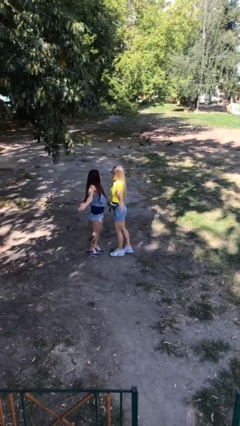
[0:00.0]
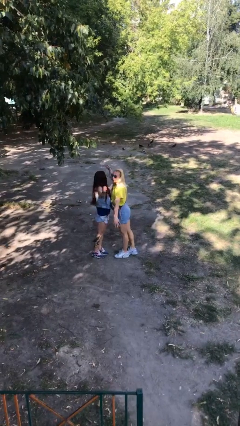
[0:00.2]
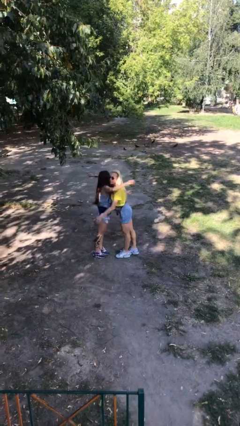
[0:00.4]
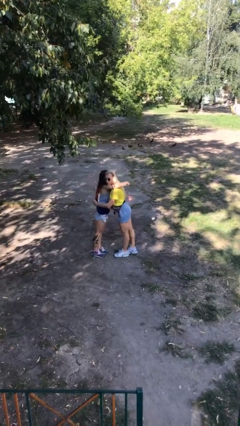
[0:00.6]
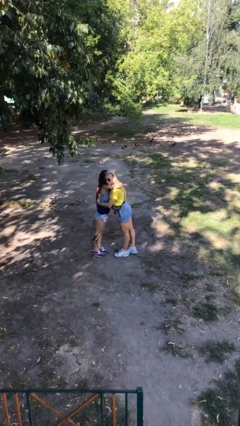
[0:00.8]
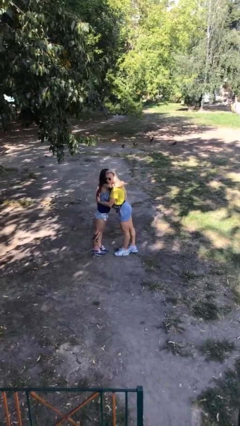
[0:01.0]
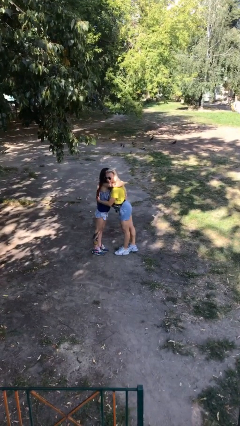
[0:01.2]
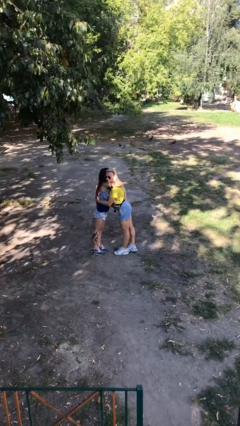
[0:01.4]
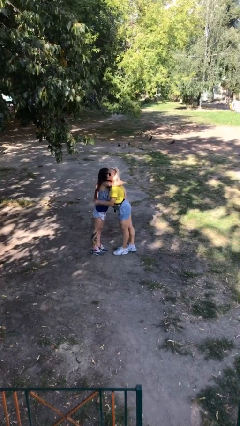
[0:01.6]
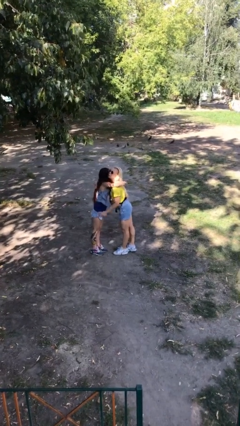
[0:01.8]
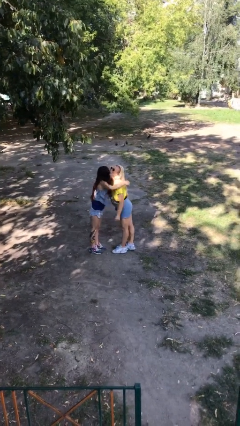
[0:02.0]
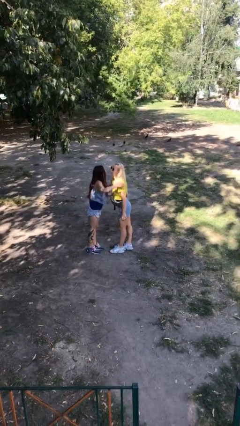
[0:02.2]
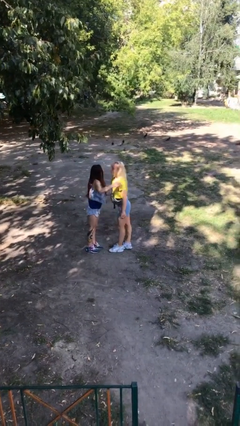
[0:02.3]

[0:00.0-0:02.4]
person embraces person

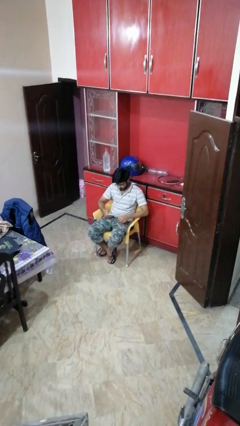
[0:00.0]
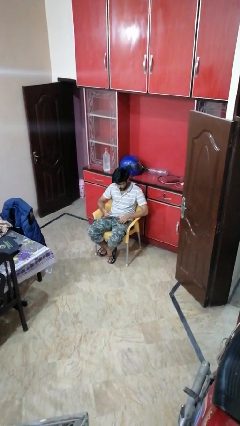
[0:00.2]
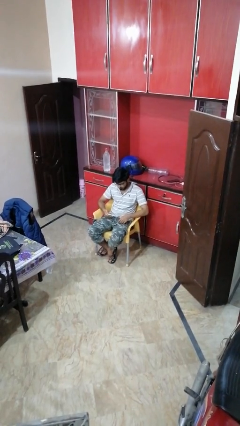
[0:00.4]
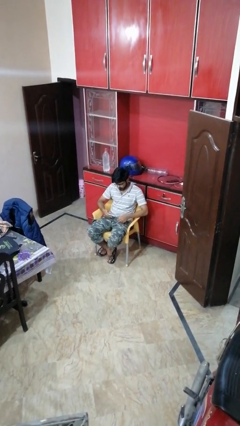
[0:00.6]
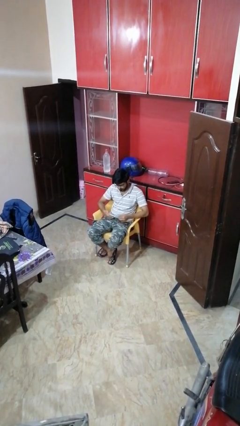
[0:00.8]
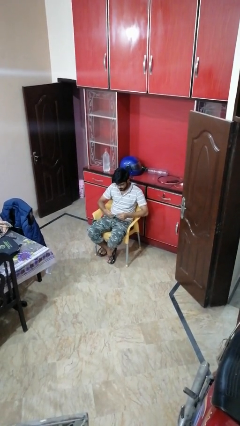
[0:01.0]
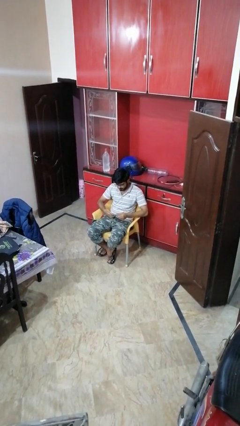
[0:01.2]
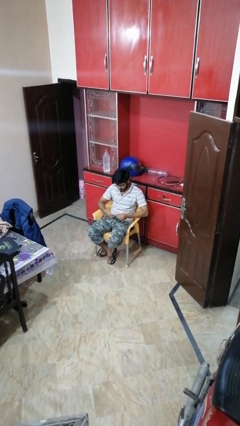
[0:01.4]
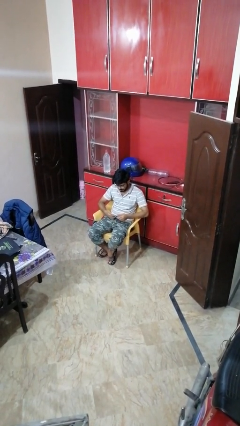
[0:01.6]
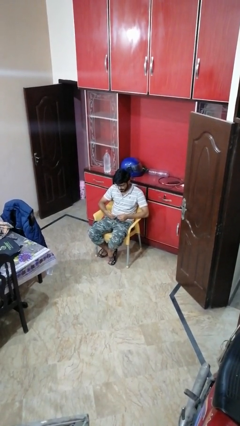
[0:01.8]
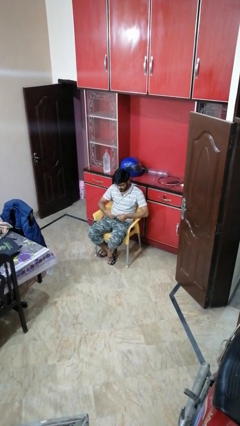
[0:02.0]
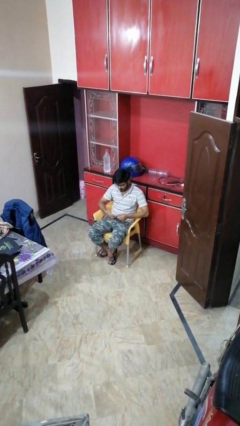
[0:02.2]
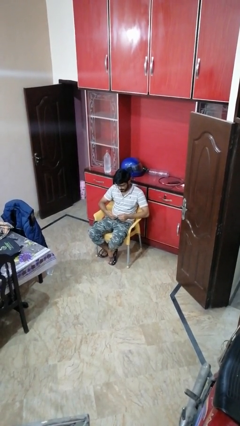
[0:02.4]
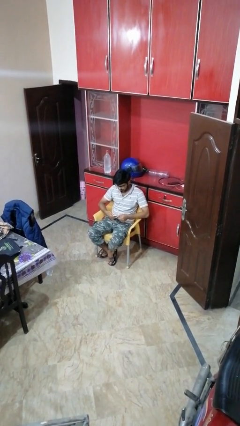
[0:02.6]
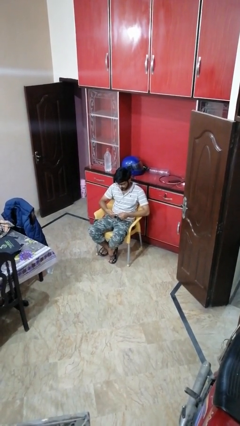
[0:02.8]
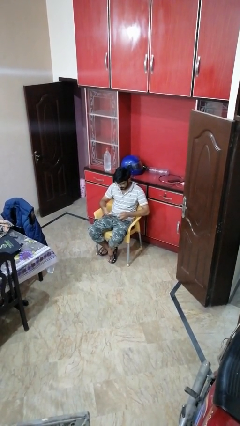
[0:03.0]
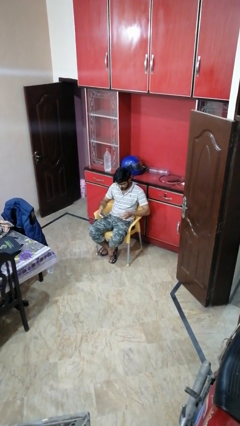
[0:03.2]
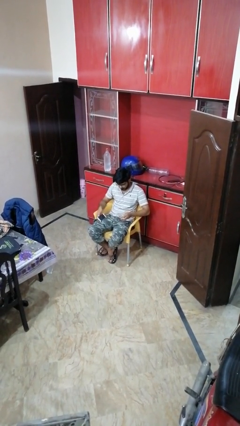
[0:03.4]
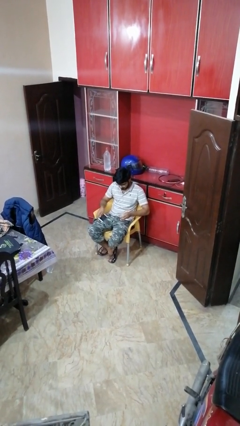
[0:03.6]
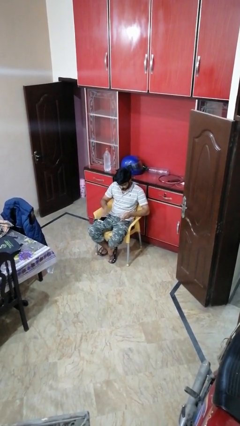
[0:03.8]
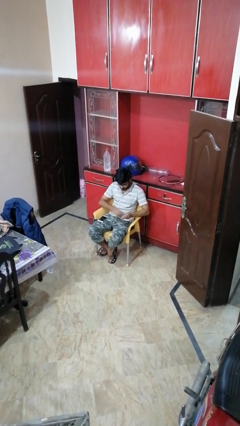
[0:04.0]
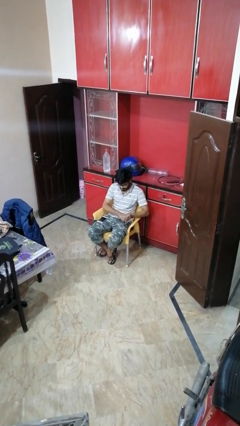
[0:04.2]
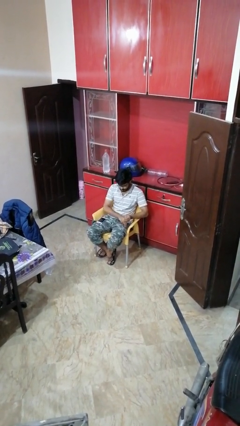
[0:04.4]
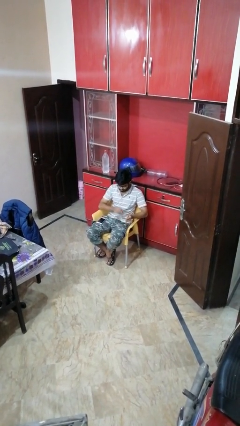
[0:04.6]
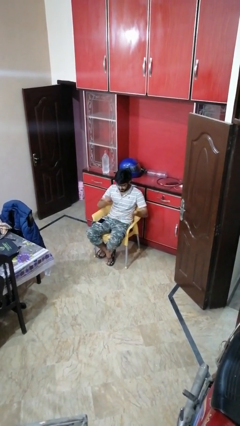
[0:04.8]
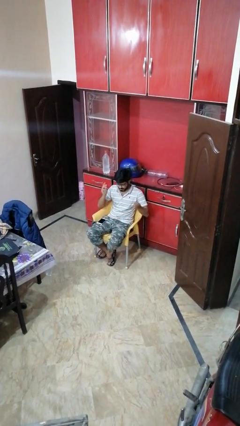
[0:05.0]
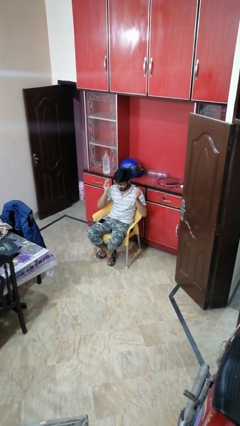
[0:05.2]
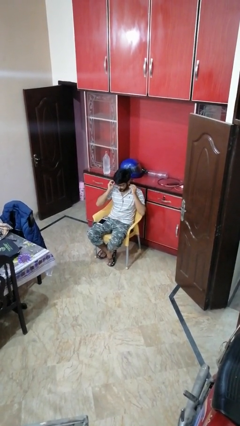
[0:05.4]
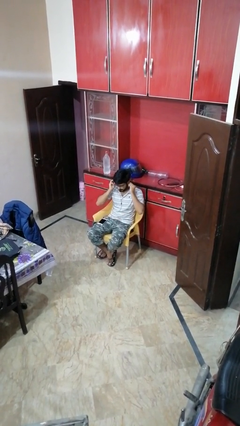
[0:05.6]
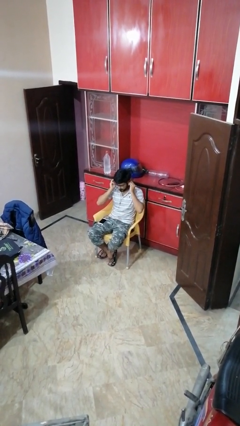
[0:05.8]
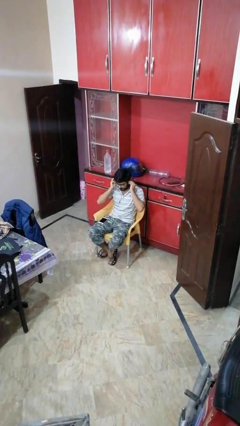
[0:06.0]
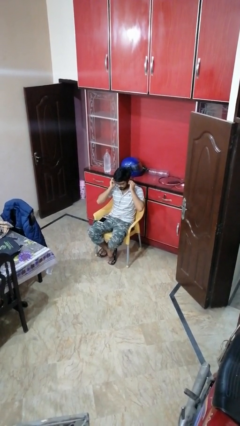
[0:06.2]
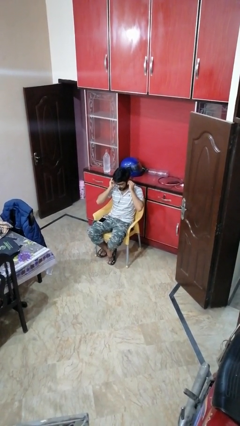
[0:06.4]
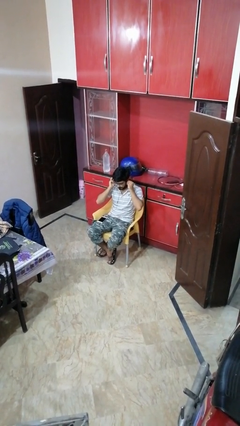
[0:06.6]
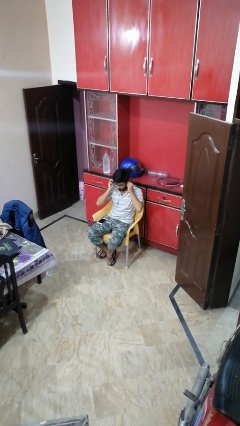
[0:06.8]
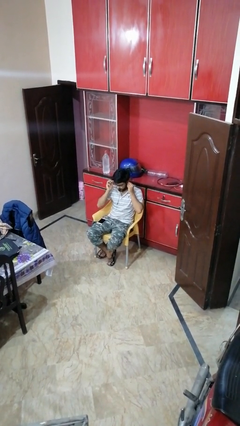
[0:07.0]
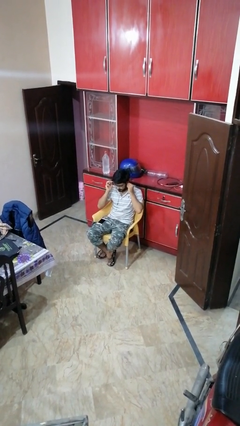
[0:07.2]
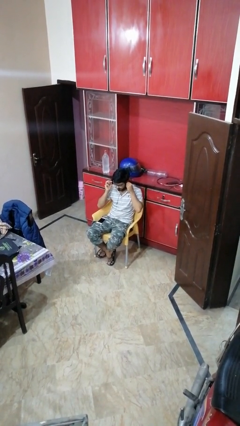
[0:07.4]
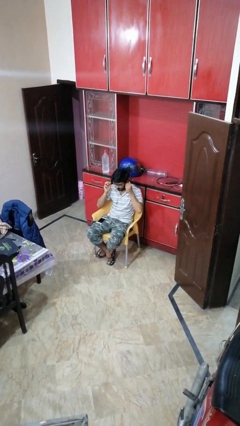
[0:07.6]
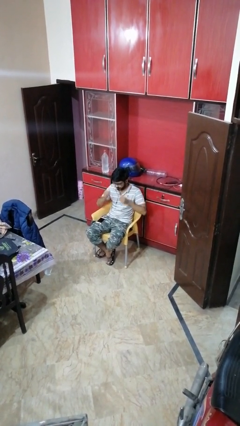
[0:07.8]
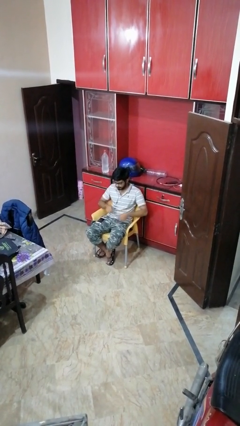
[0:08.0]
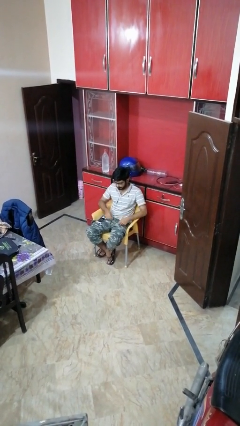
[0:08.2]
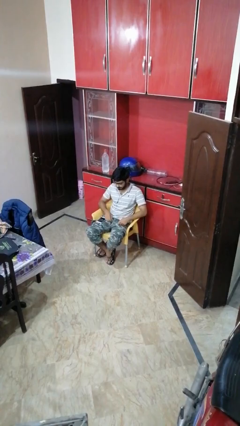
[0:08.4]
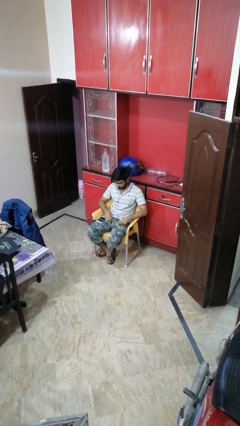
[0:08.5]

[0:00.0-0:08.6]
person puts on headphones

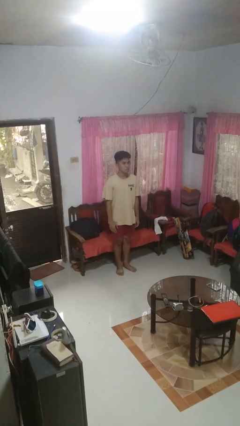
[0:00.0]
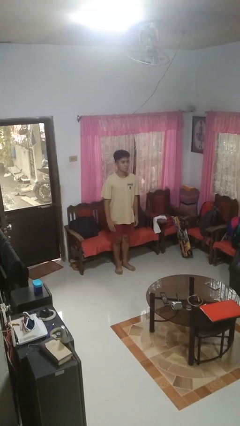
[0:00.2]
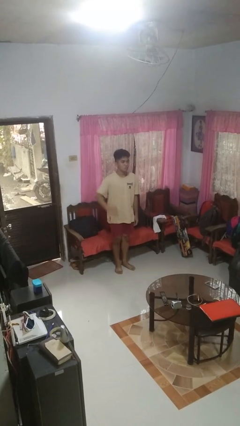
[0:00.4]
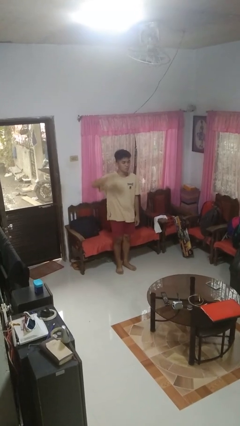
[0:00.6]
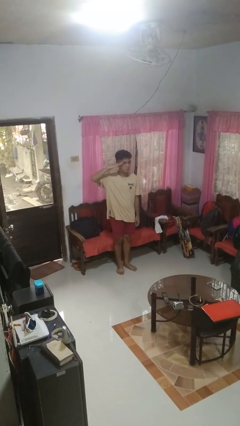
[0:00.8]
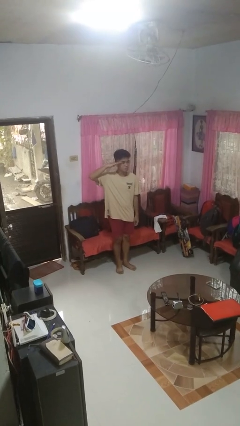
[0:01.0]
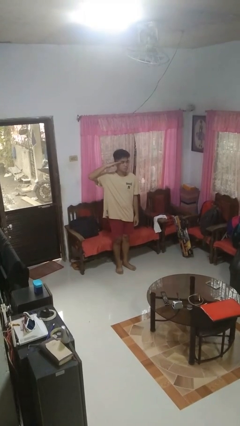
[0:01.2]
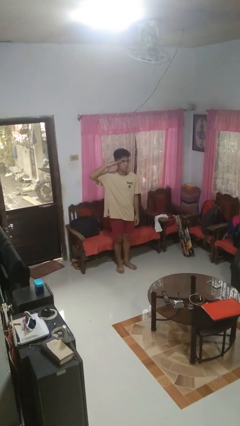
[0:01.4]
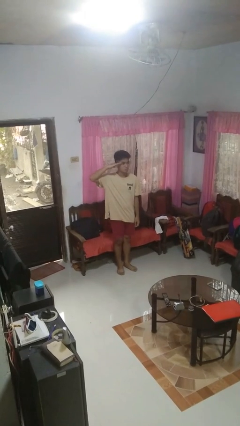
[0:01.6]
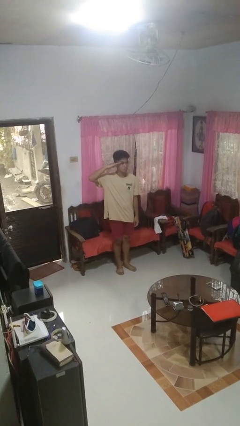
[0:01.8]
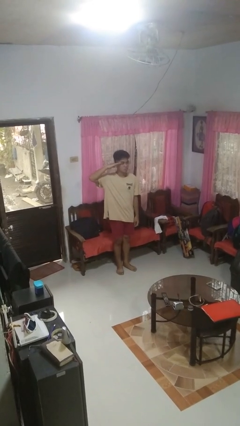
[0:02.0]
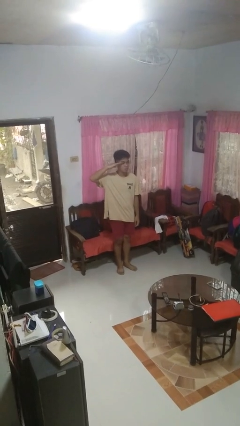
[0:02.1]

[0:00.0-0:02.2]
person salutes

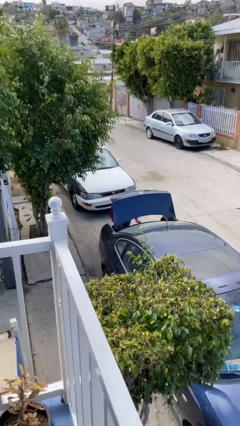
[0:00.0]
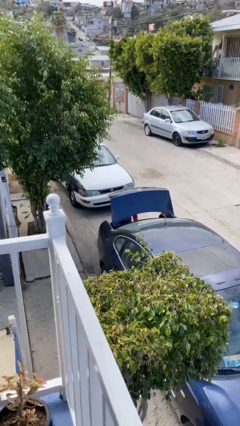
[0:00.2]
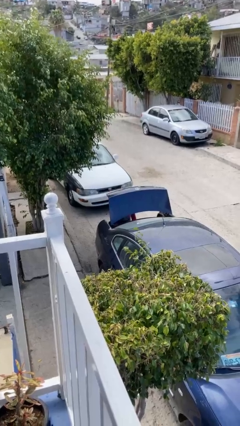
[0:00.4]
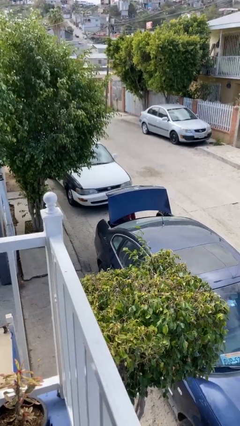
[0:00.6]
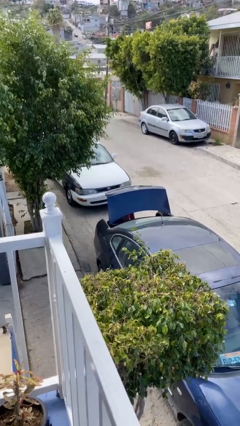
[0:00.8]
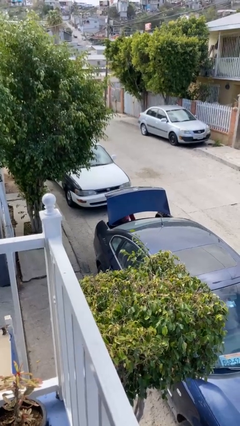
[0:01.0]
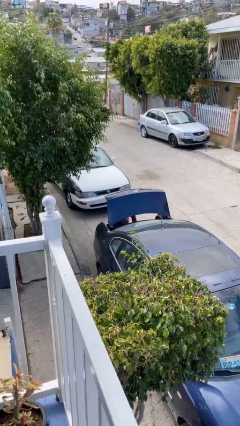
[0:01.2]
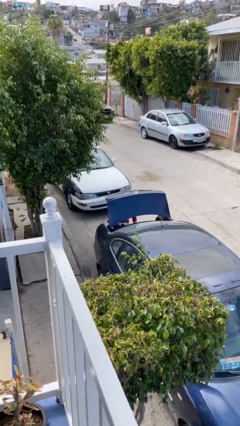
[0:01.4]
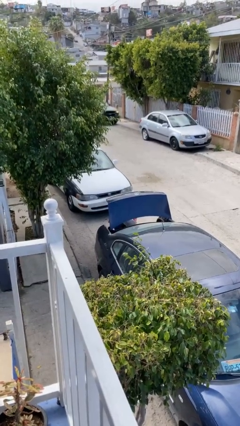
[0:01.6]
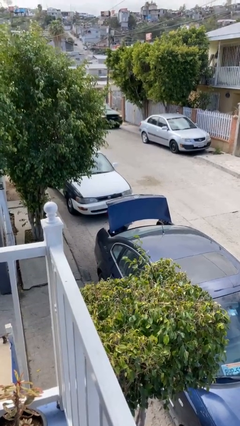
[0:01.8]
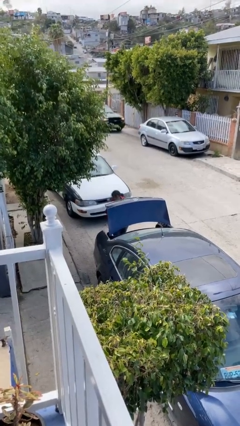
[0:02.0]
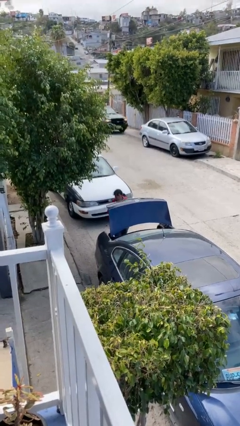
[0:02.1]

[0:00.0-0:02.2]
person unloads car

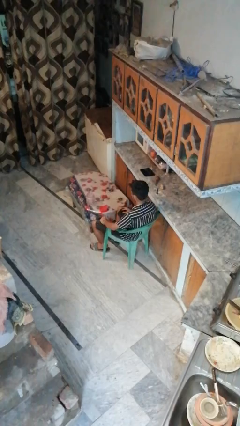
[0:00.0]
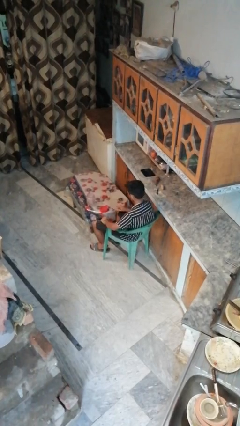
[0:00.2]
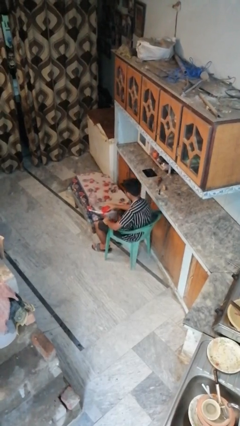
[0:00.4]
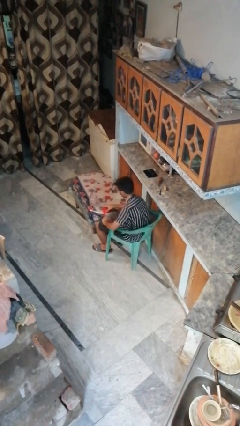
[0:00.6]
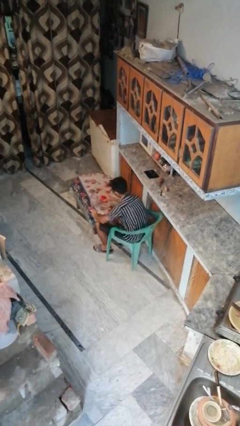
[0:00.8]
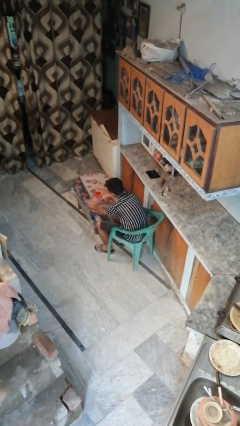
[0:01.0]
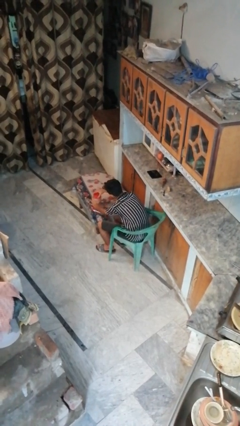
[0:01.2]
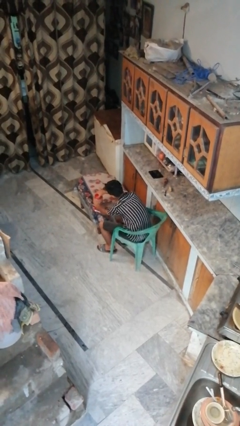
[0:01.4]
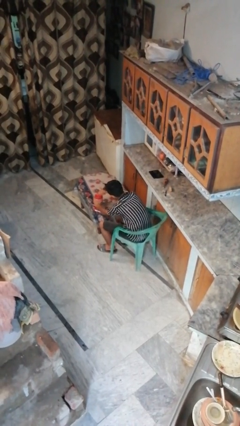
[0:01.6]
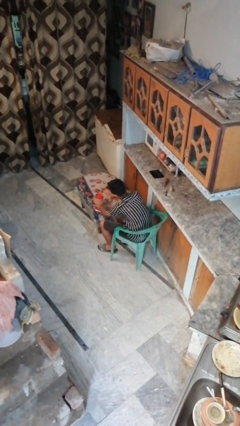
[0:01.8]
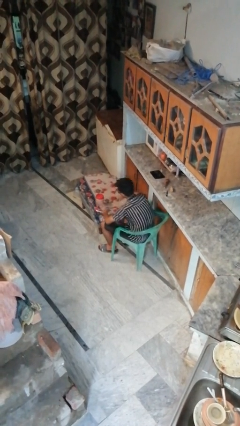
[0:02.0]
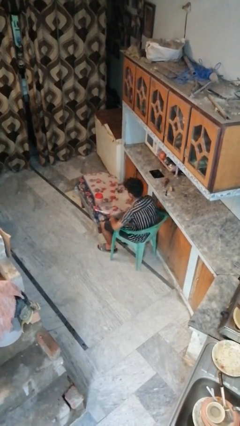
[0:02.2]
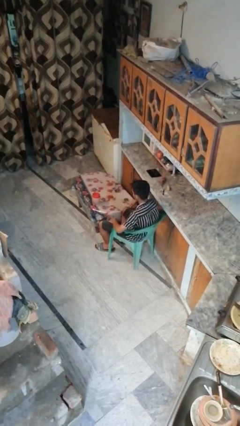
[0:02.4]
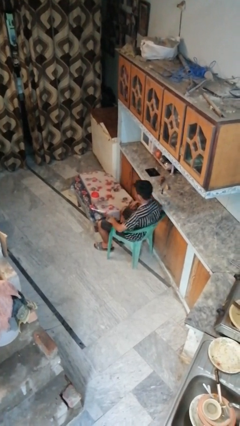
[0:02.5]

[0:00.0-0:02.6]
person closes jar
